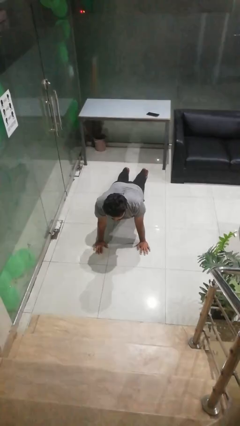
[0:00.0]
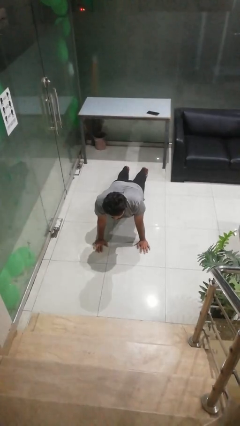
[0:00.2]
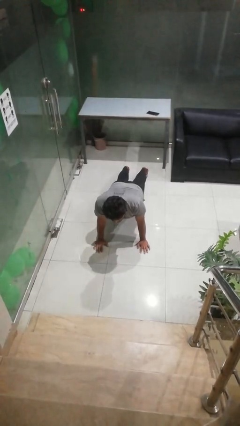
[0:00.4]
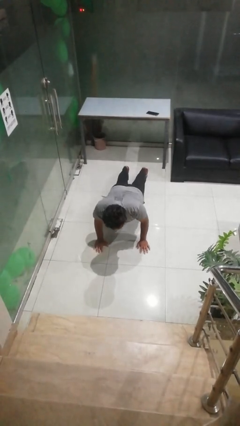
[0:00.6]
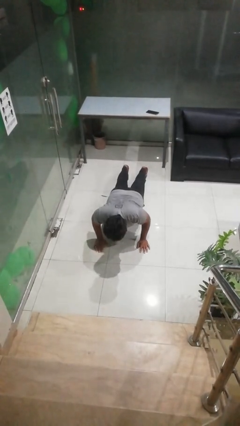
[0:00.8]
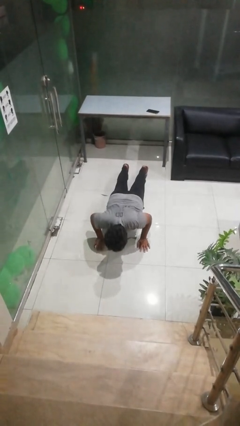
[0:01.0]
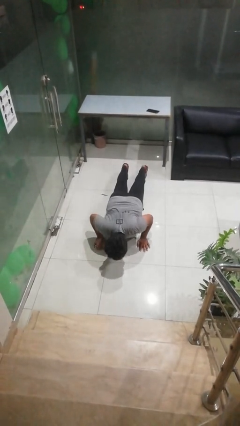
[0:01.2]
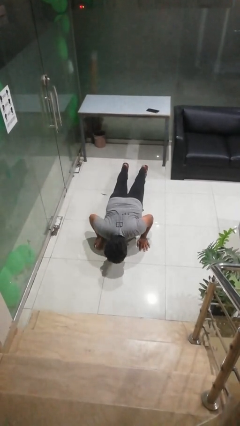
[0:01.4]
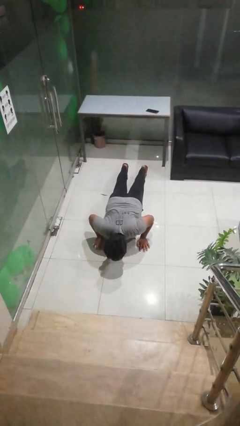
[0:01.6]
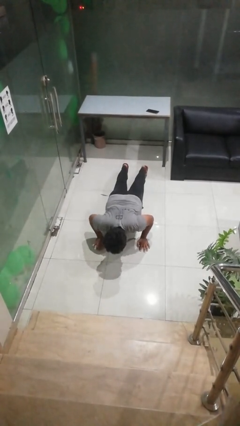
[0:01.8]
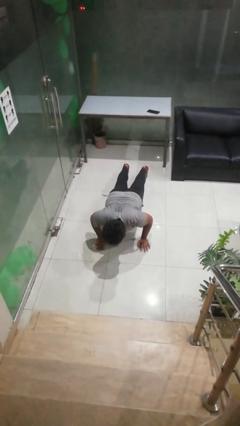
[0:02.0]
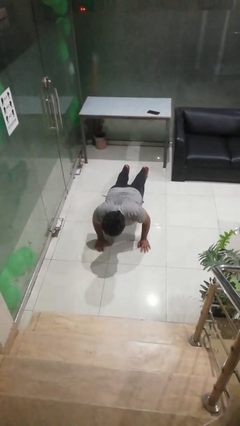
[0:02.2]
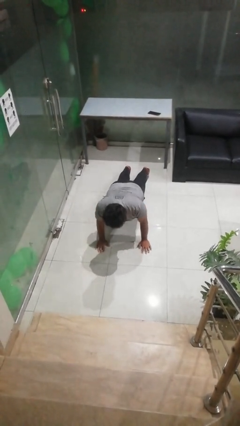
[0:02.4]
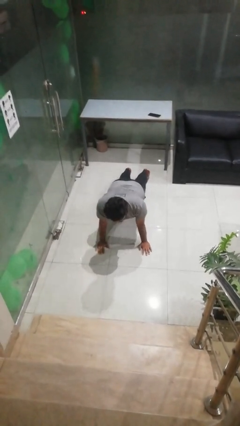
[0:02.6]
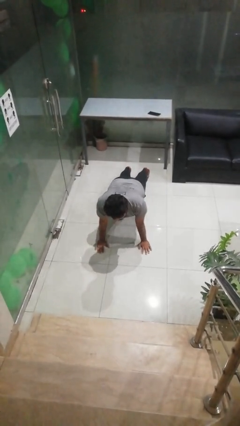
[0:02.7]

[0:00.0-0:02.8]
person exercises with pushup

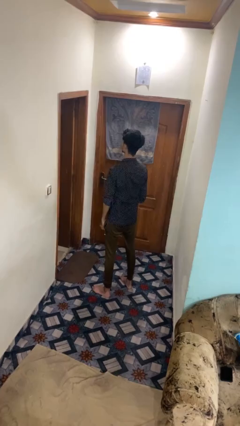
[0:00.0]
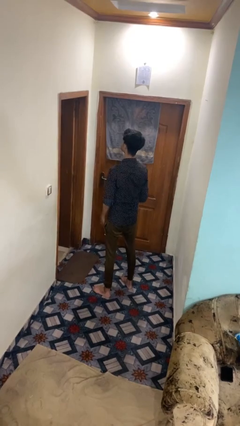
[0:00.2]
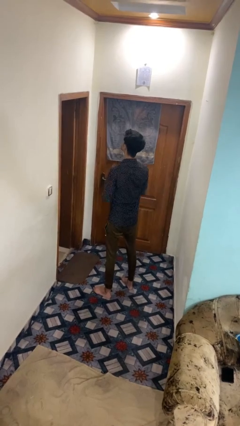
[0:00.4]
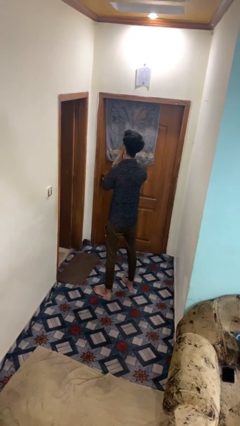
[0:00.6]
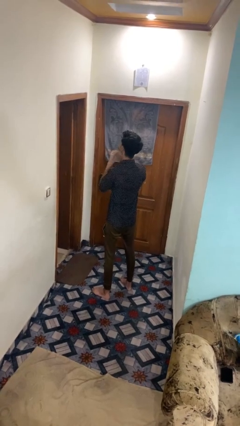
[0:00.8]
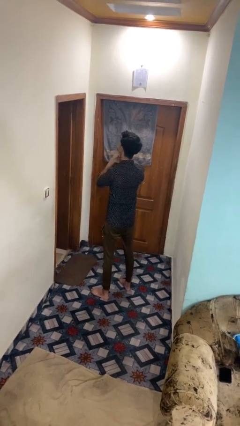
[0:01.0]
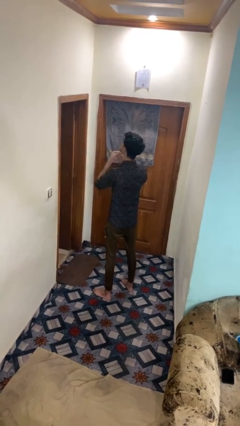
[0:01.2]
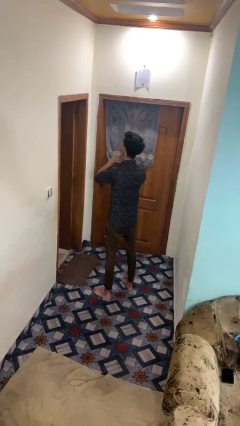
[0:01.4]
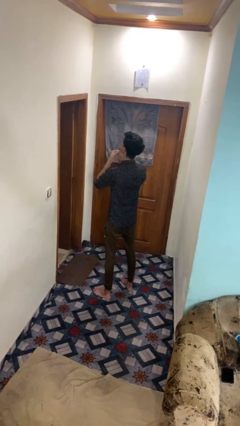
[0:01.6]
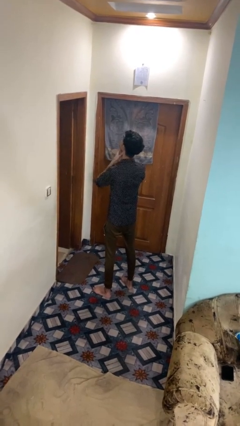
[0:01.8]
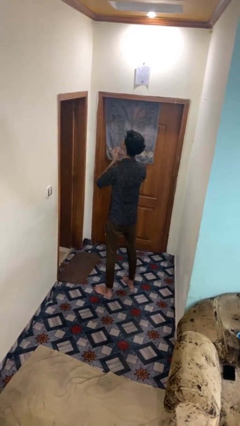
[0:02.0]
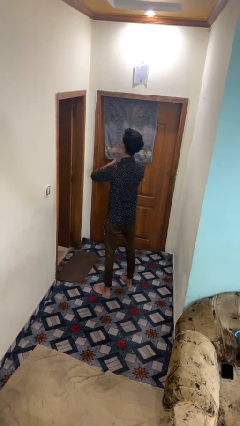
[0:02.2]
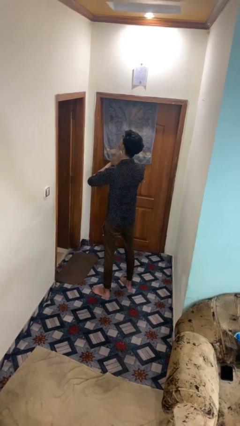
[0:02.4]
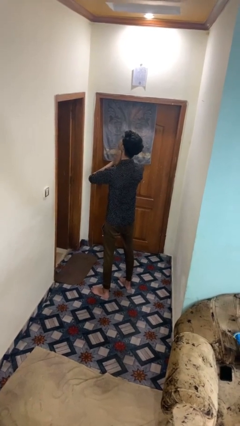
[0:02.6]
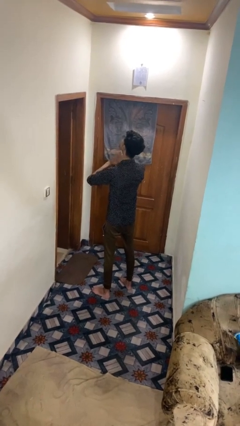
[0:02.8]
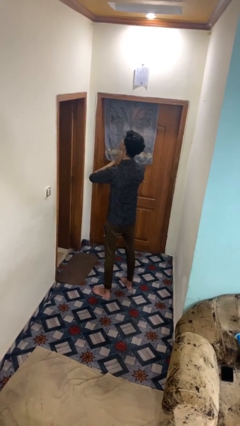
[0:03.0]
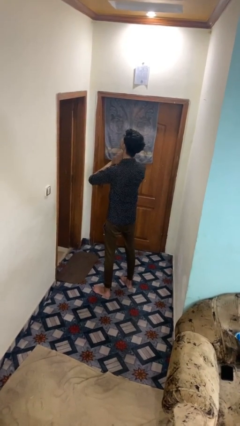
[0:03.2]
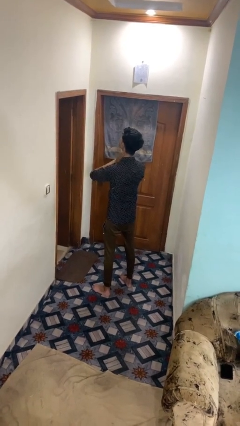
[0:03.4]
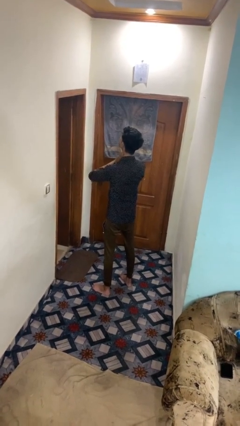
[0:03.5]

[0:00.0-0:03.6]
person rubs neck

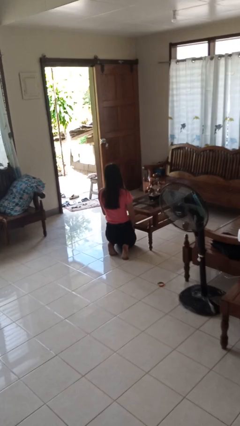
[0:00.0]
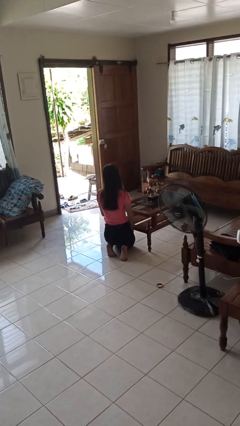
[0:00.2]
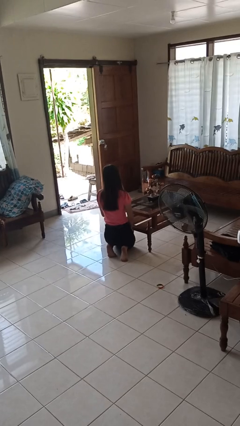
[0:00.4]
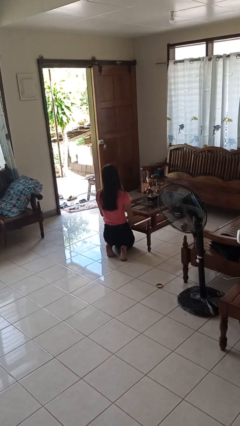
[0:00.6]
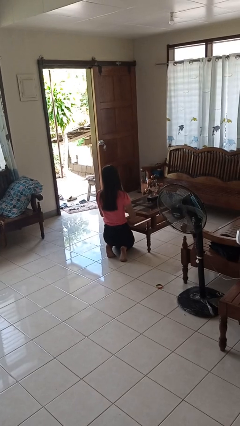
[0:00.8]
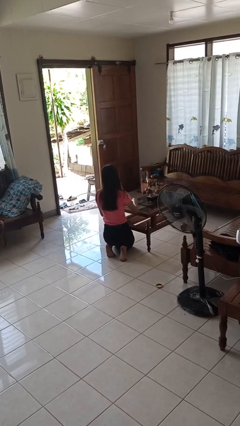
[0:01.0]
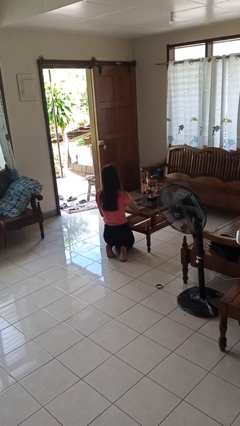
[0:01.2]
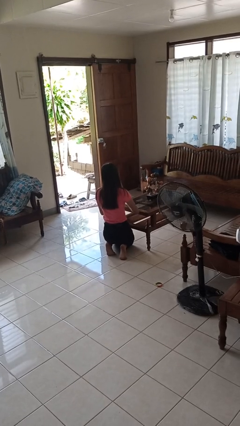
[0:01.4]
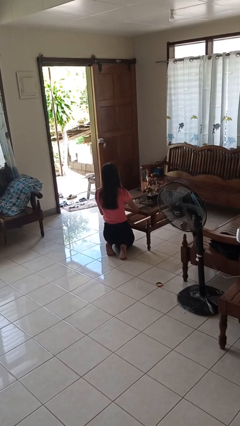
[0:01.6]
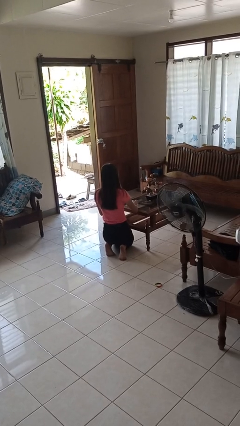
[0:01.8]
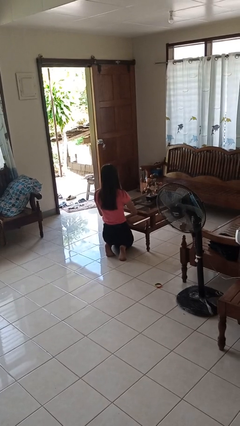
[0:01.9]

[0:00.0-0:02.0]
person cleans table with rag

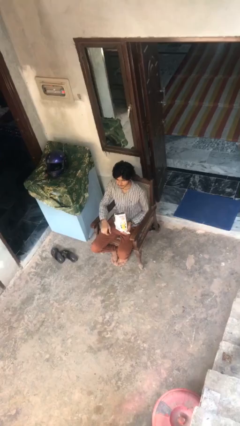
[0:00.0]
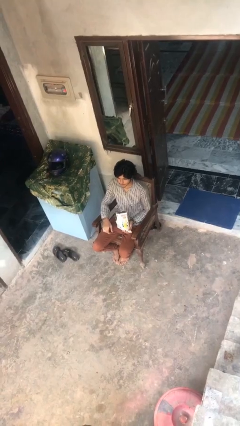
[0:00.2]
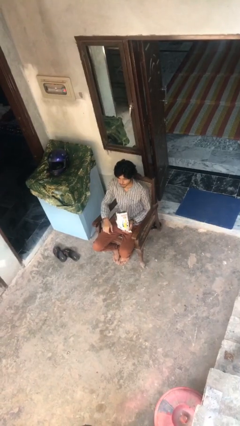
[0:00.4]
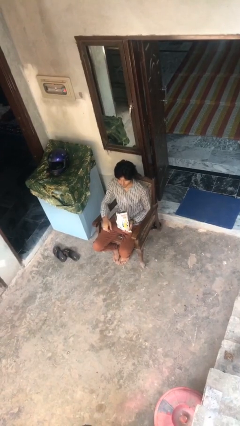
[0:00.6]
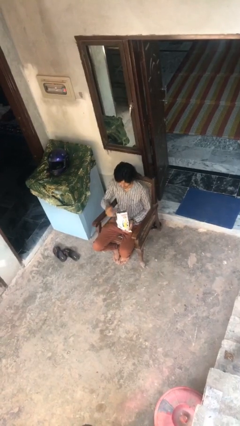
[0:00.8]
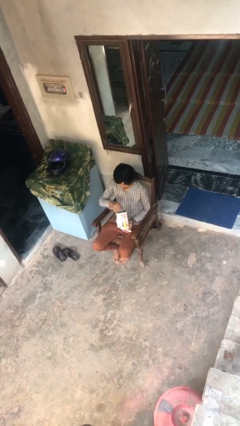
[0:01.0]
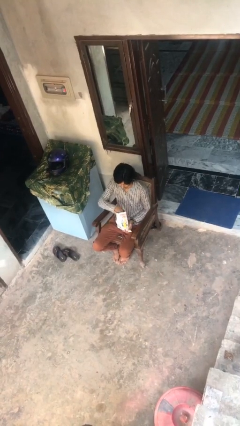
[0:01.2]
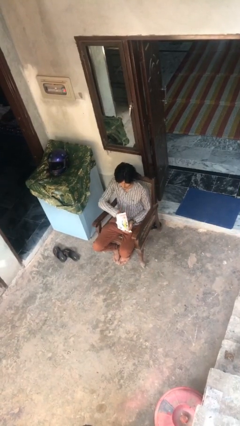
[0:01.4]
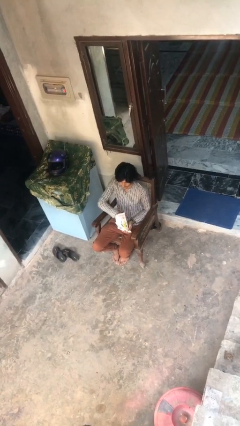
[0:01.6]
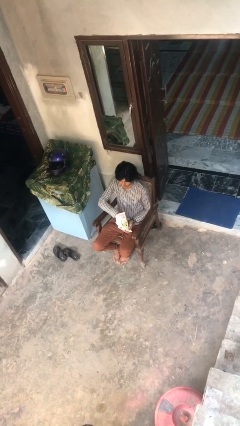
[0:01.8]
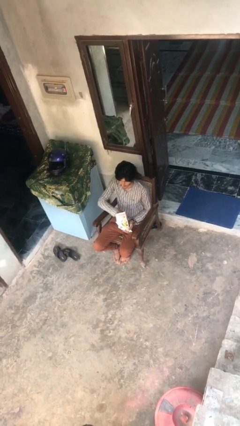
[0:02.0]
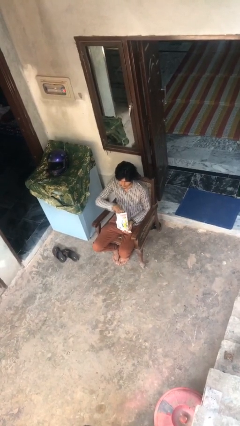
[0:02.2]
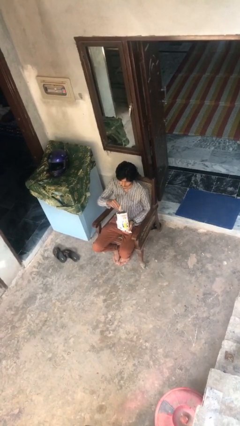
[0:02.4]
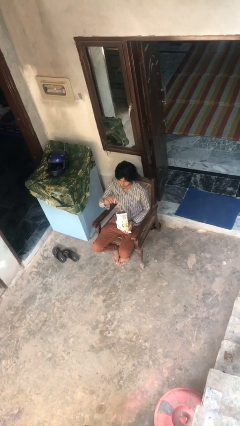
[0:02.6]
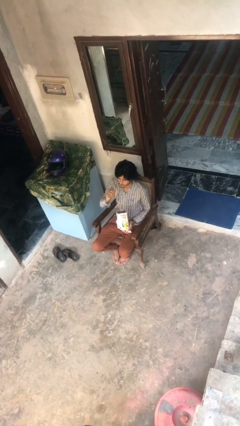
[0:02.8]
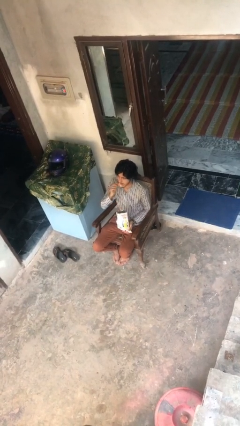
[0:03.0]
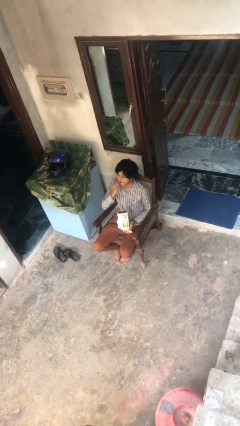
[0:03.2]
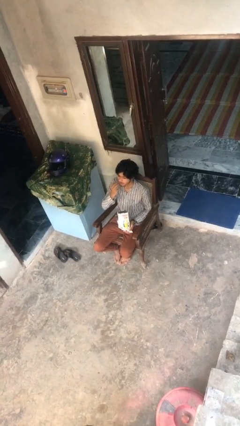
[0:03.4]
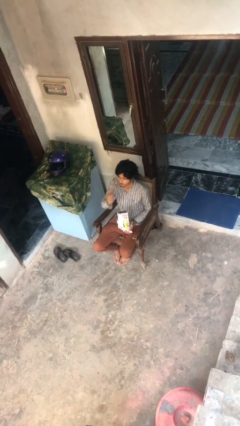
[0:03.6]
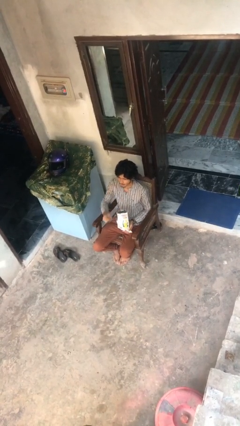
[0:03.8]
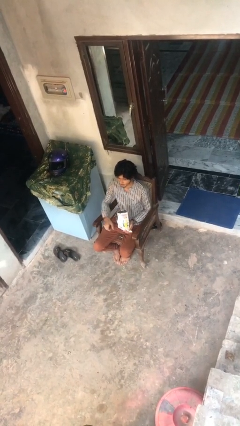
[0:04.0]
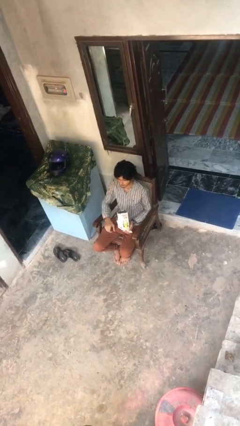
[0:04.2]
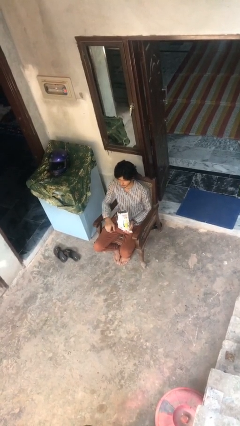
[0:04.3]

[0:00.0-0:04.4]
person eats snack from bag

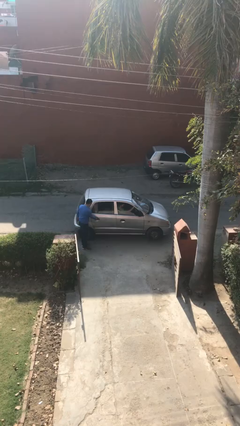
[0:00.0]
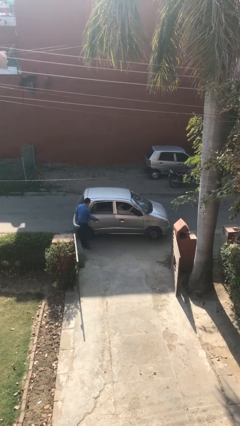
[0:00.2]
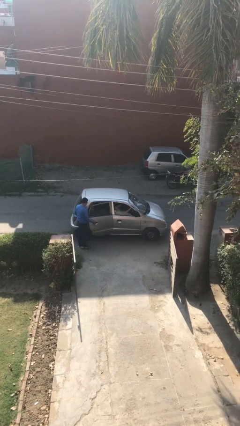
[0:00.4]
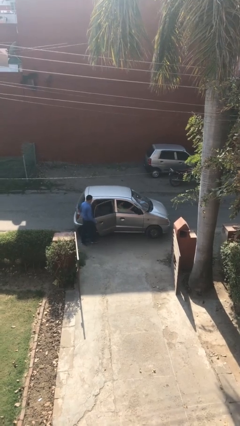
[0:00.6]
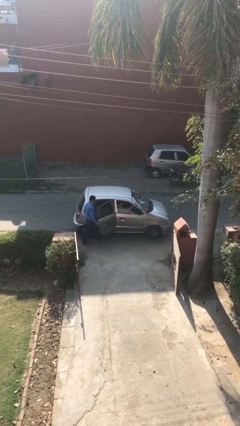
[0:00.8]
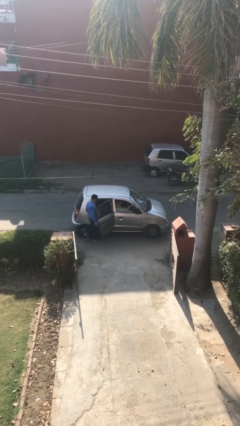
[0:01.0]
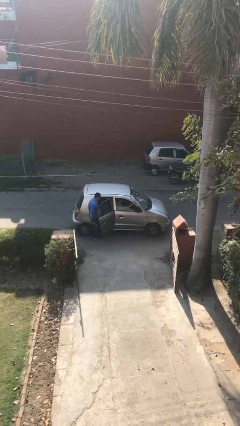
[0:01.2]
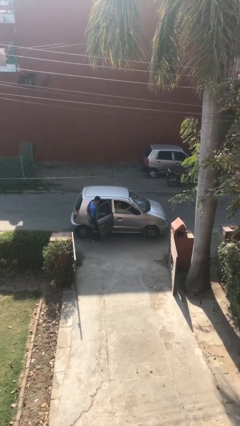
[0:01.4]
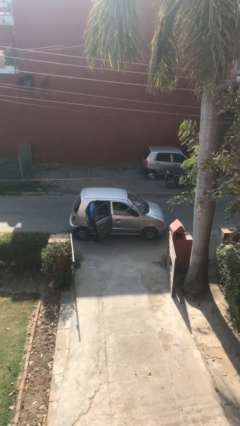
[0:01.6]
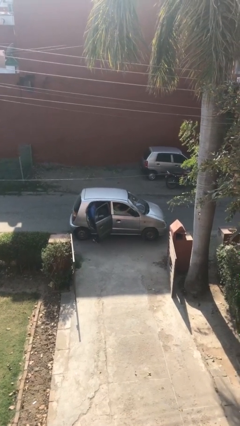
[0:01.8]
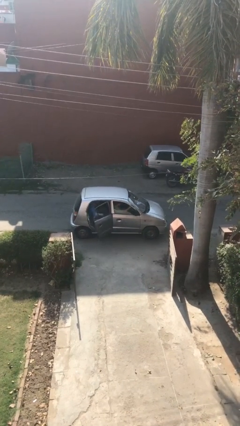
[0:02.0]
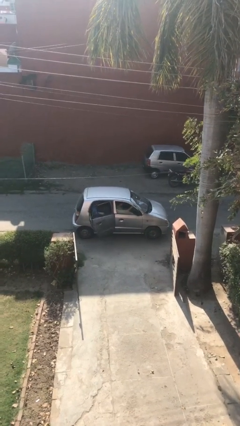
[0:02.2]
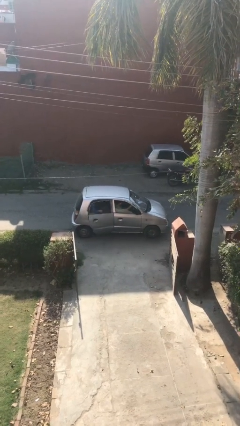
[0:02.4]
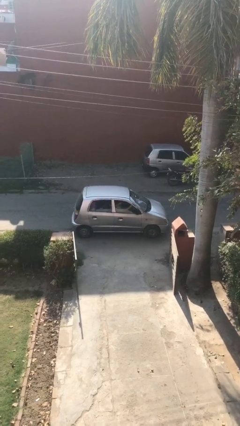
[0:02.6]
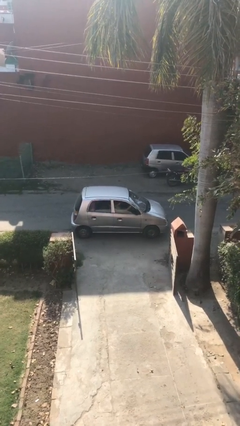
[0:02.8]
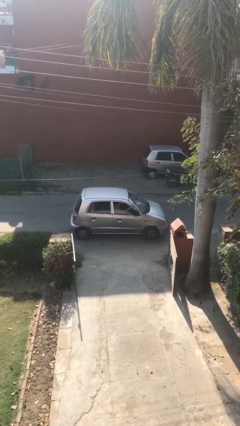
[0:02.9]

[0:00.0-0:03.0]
car picks up person

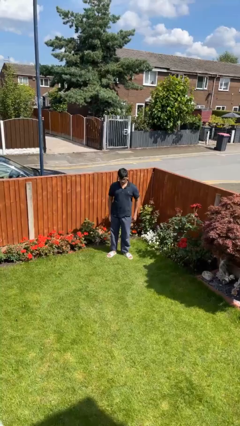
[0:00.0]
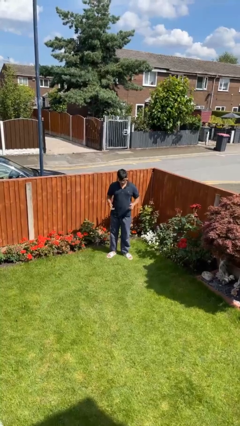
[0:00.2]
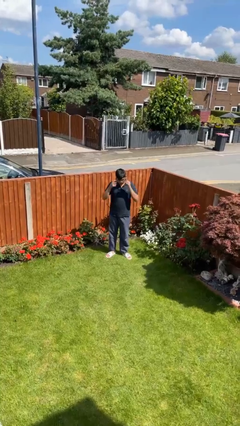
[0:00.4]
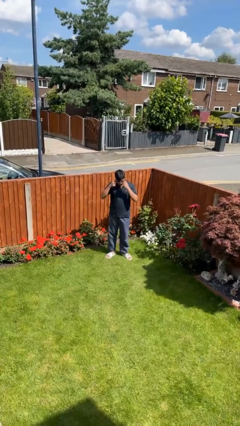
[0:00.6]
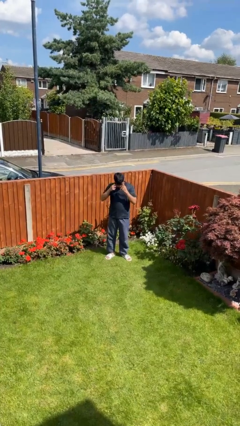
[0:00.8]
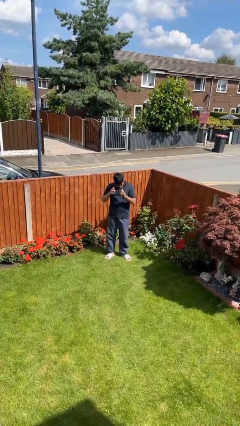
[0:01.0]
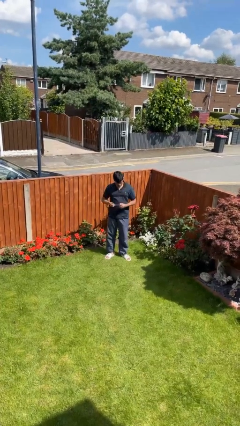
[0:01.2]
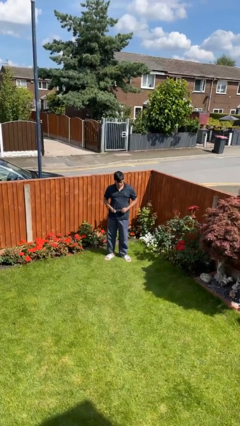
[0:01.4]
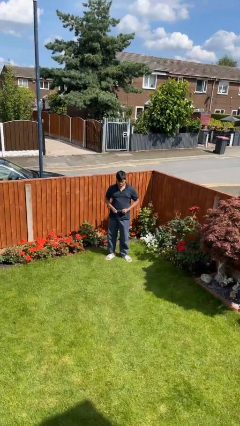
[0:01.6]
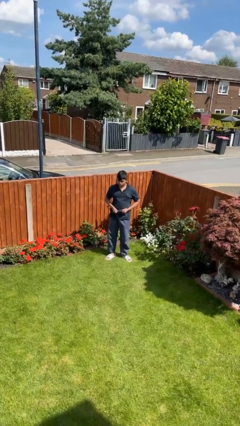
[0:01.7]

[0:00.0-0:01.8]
person takes off glasses

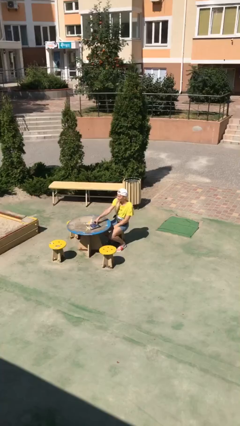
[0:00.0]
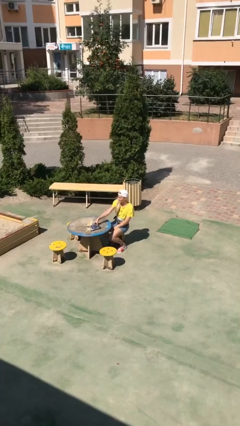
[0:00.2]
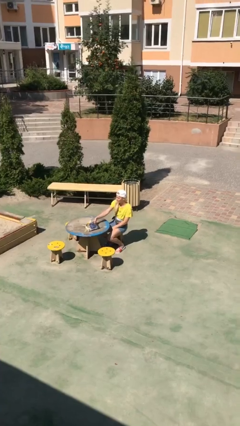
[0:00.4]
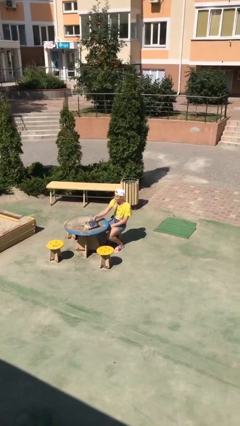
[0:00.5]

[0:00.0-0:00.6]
person picks up object from table
